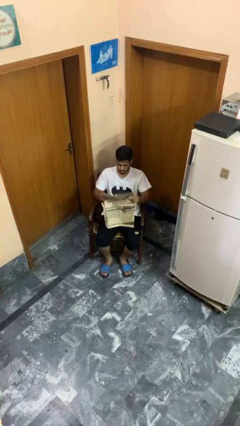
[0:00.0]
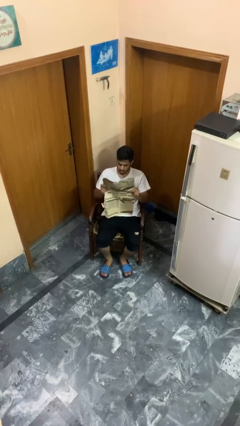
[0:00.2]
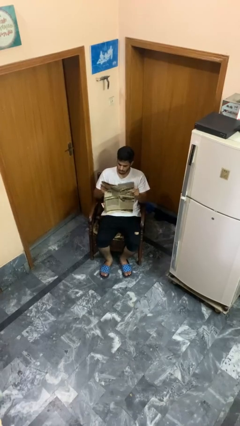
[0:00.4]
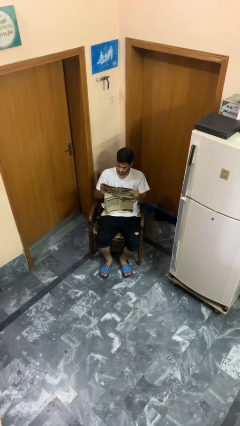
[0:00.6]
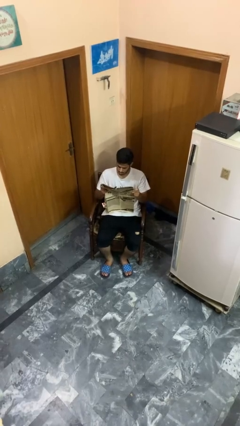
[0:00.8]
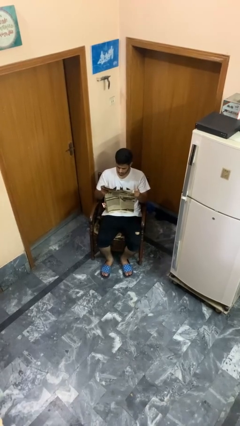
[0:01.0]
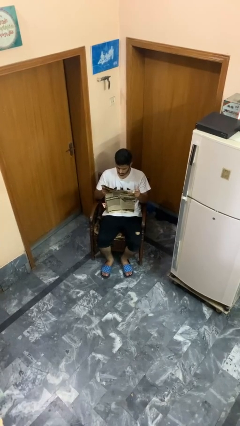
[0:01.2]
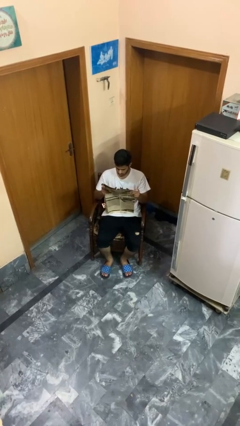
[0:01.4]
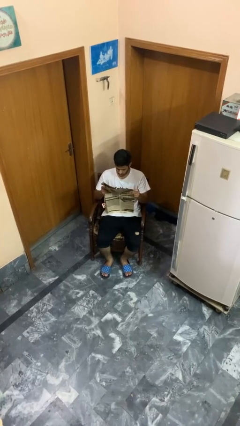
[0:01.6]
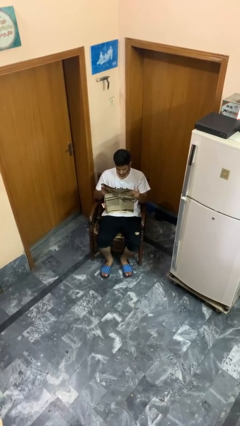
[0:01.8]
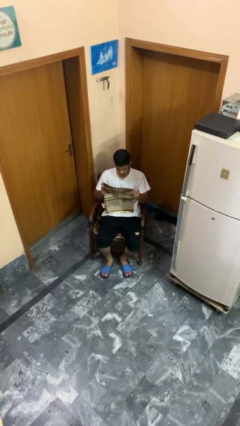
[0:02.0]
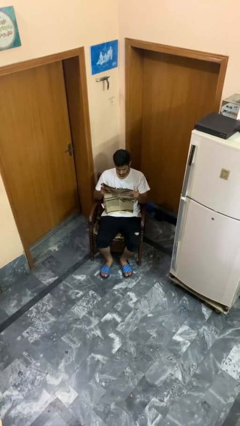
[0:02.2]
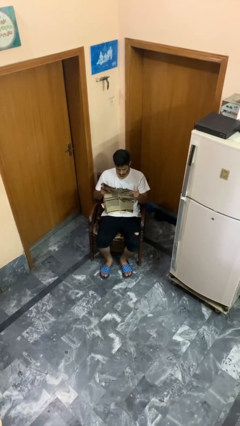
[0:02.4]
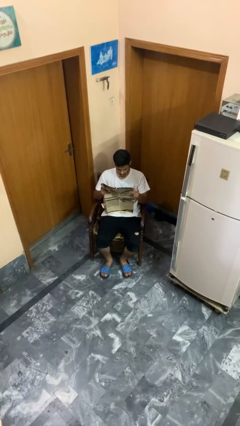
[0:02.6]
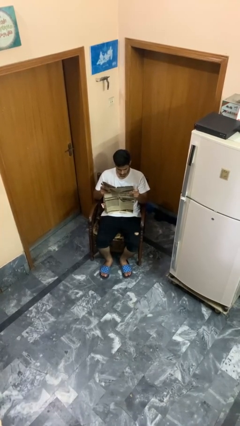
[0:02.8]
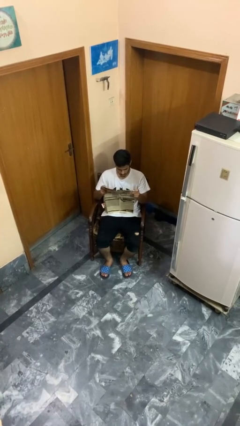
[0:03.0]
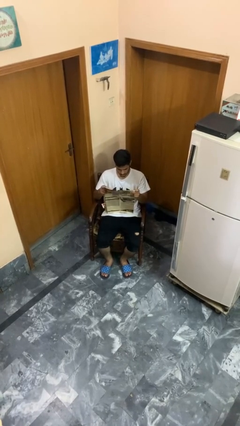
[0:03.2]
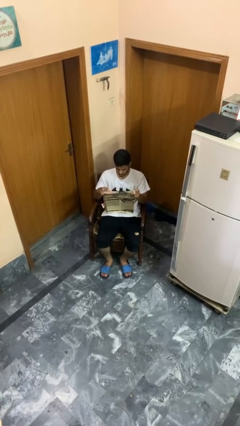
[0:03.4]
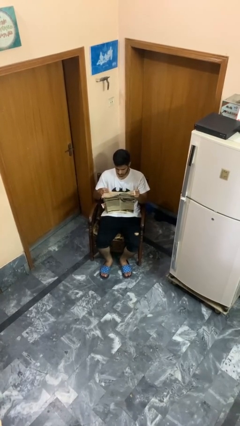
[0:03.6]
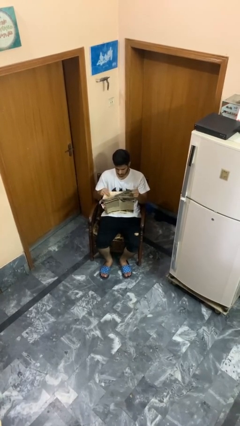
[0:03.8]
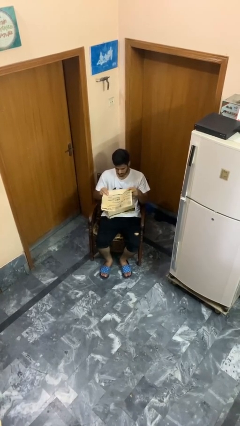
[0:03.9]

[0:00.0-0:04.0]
person reads newspaper

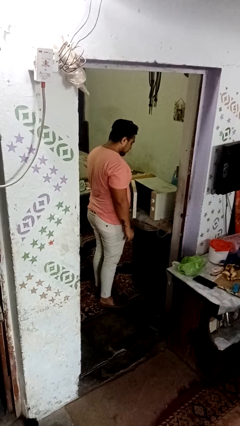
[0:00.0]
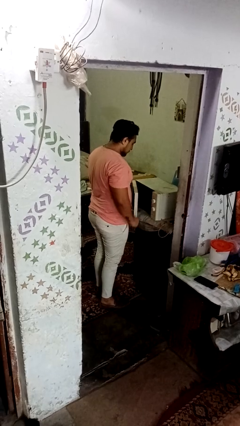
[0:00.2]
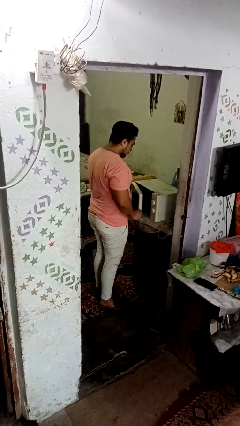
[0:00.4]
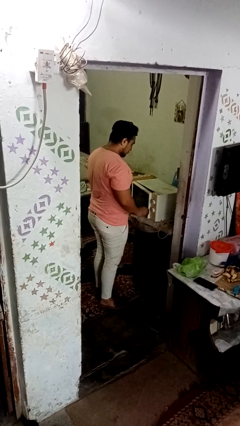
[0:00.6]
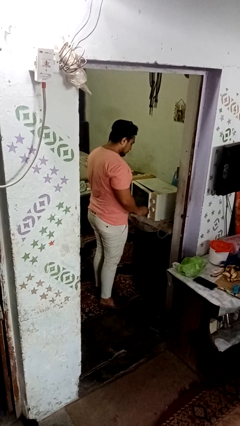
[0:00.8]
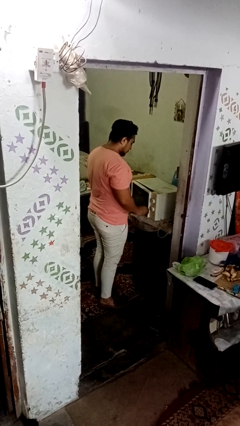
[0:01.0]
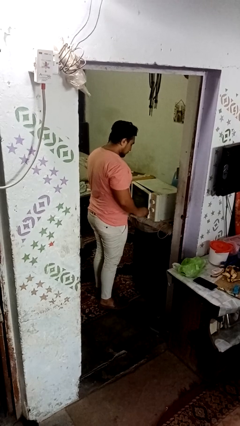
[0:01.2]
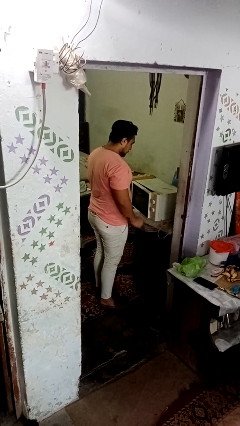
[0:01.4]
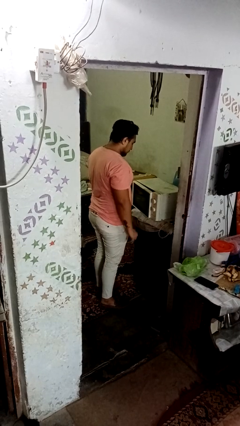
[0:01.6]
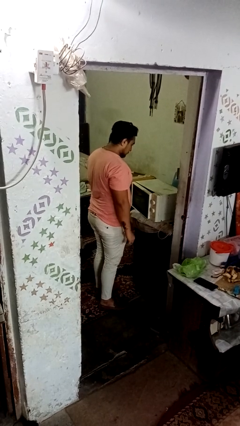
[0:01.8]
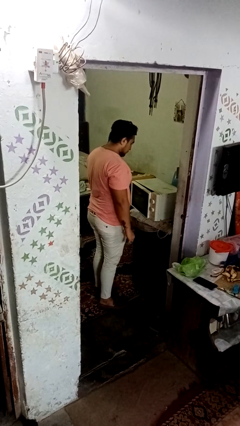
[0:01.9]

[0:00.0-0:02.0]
person closes dishwasher

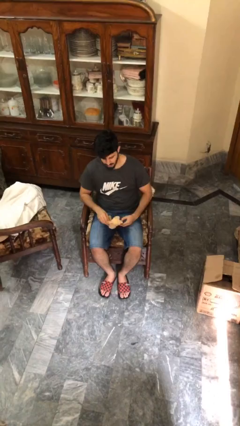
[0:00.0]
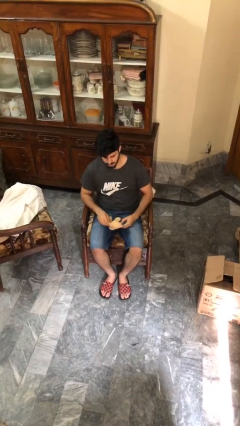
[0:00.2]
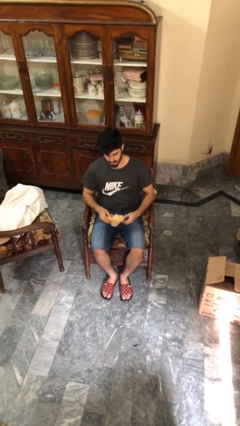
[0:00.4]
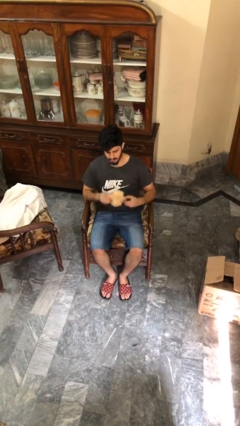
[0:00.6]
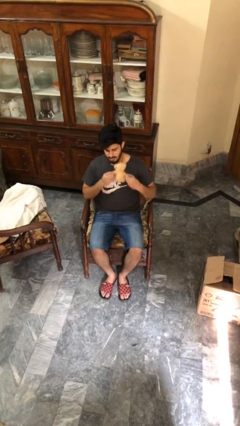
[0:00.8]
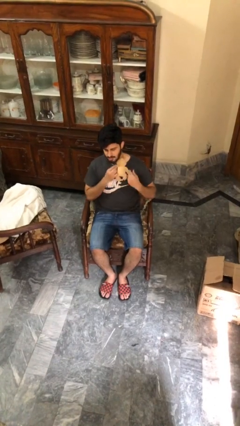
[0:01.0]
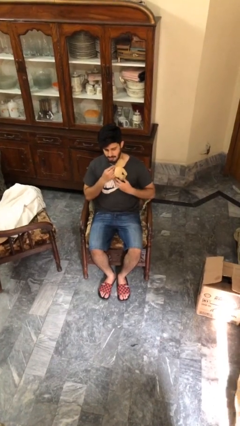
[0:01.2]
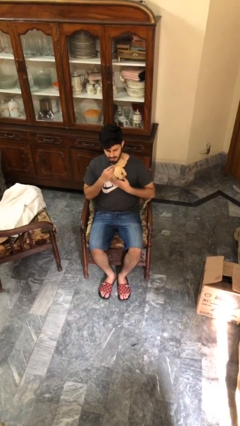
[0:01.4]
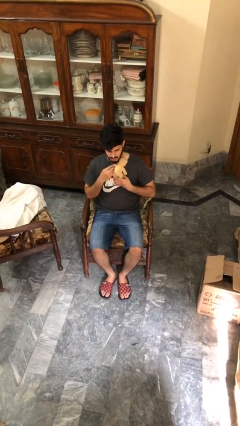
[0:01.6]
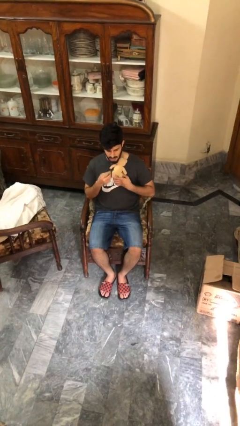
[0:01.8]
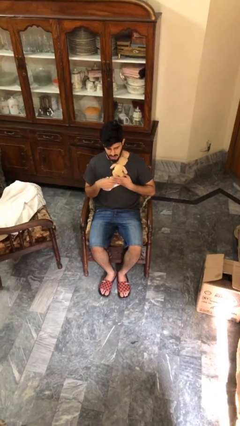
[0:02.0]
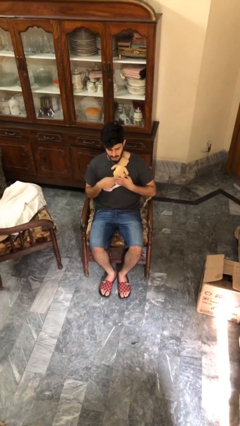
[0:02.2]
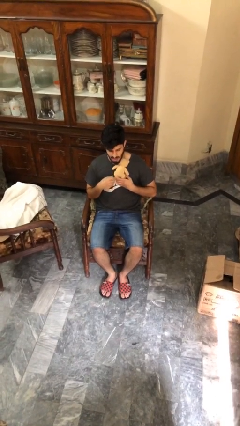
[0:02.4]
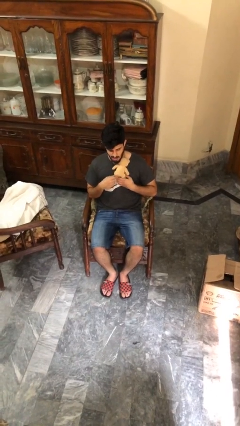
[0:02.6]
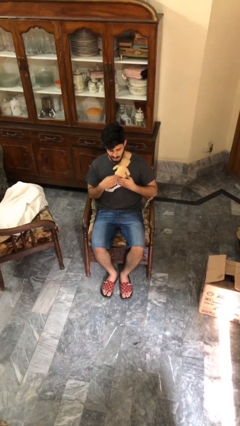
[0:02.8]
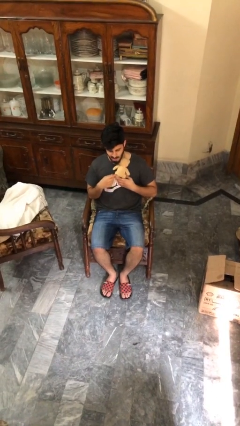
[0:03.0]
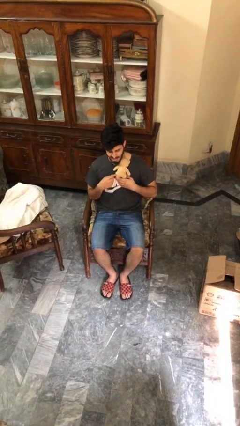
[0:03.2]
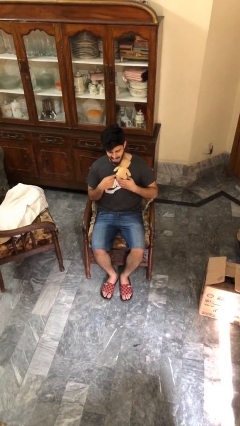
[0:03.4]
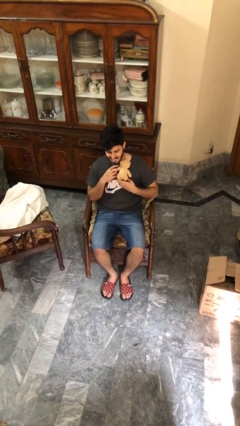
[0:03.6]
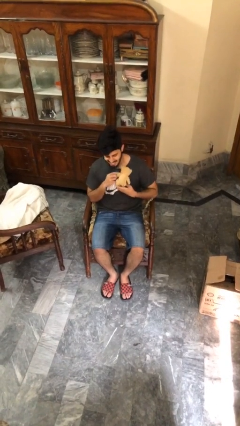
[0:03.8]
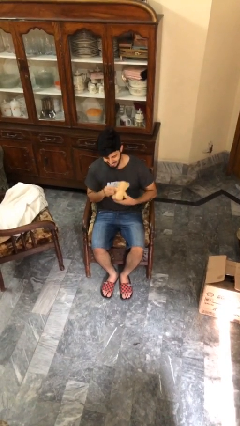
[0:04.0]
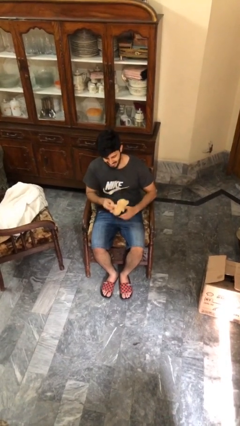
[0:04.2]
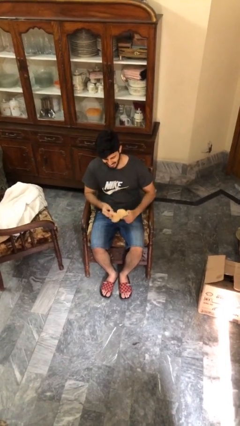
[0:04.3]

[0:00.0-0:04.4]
person hugs stuffed animal

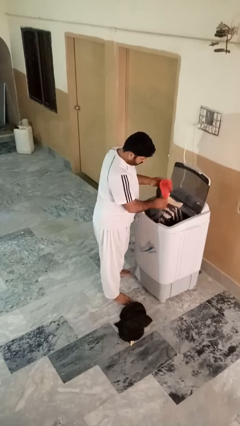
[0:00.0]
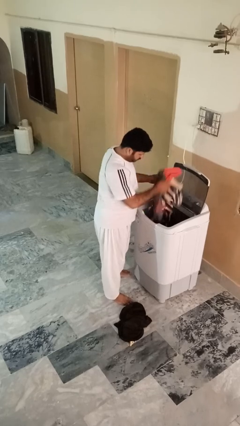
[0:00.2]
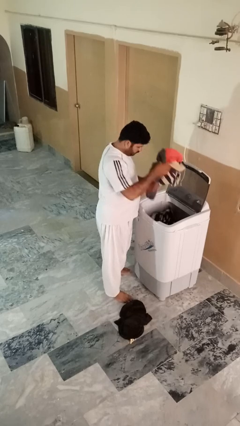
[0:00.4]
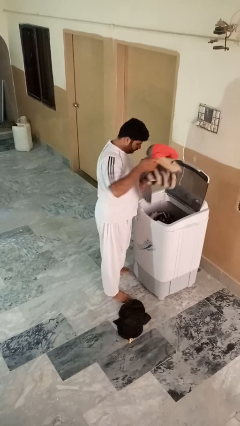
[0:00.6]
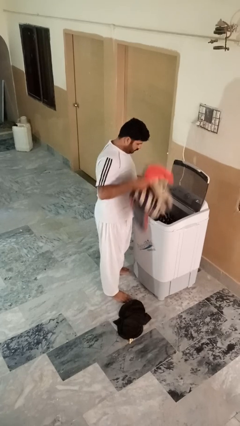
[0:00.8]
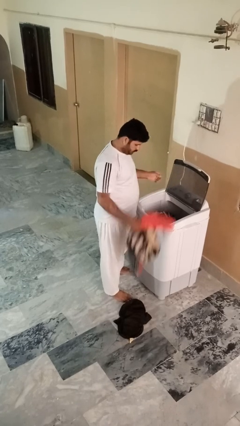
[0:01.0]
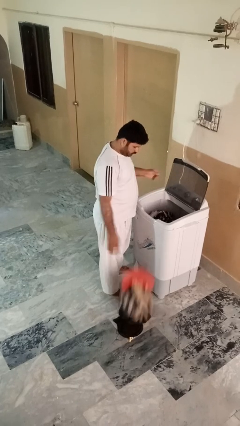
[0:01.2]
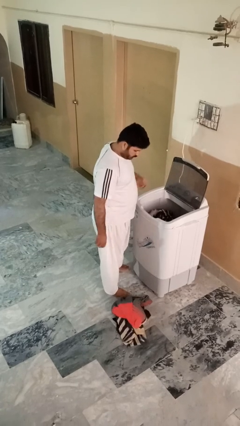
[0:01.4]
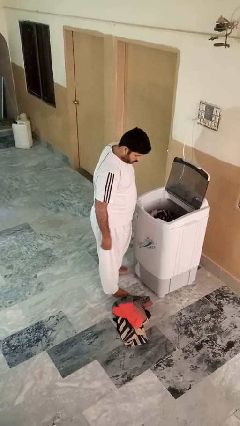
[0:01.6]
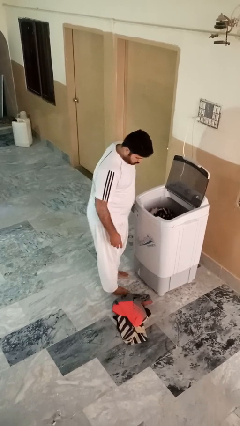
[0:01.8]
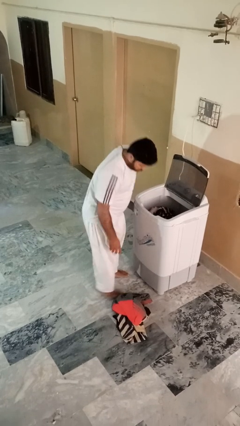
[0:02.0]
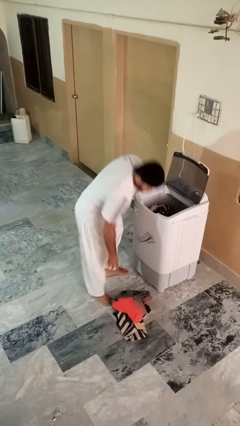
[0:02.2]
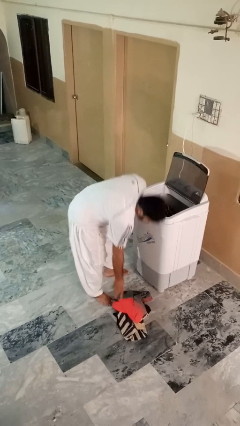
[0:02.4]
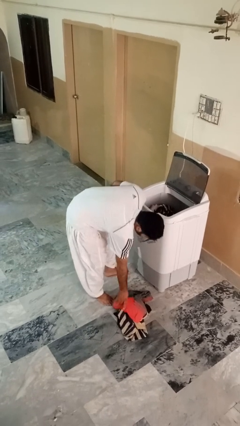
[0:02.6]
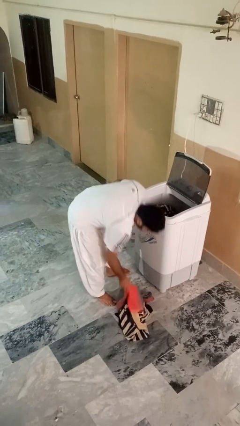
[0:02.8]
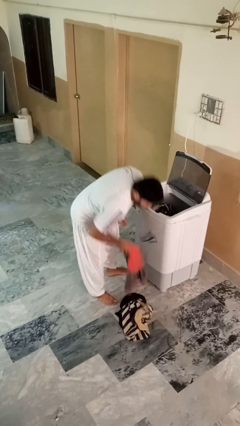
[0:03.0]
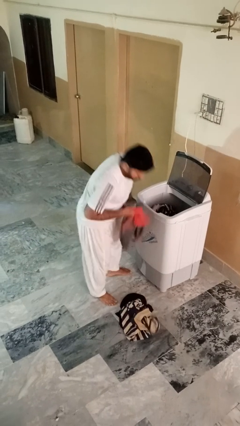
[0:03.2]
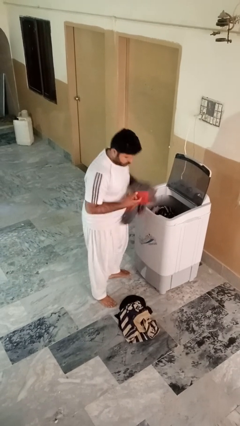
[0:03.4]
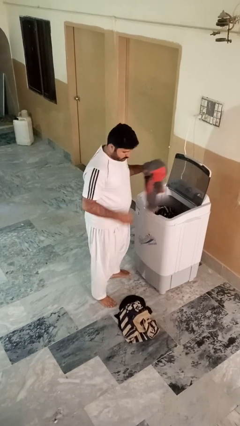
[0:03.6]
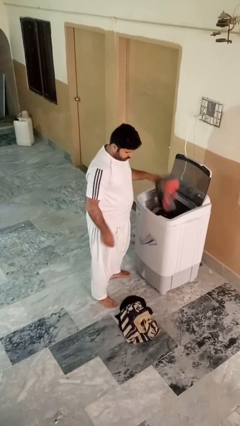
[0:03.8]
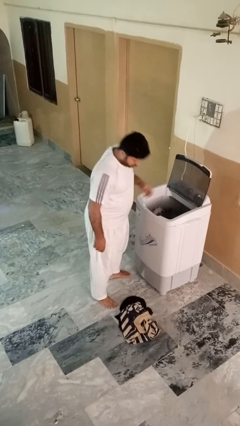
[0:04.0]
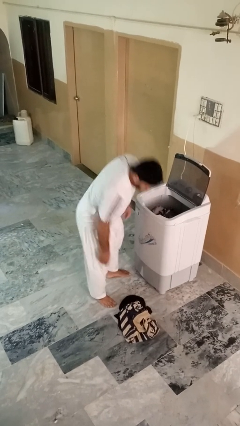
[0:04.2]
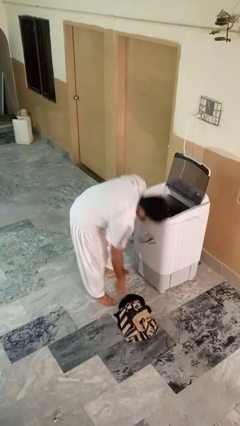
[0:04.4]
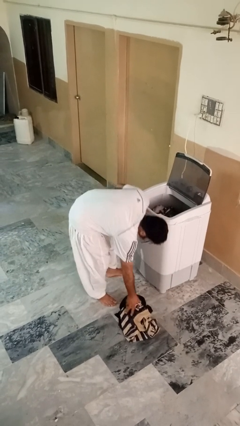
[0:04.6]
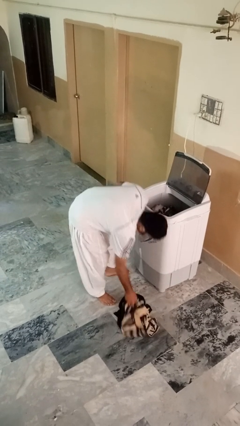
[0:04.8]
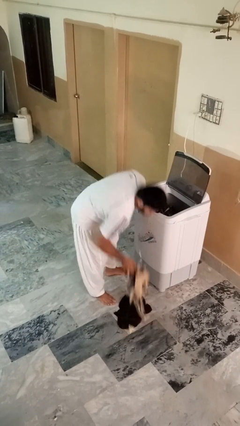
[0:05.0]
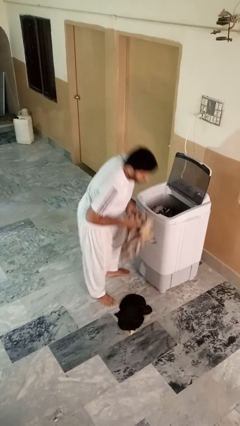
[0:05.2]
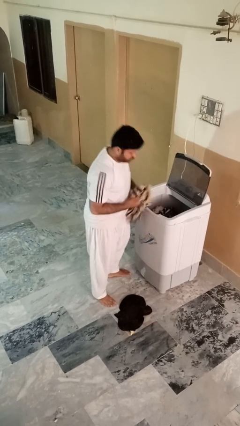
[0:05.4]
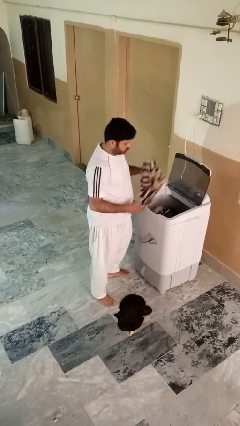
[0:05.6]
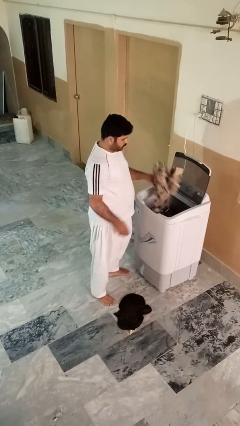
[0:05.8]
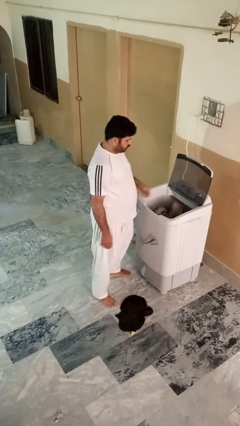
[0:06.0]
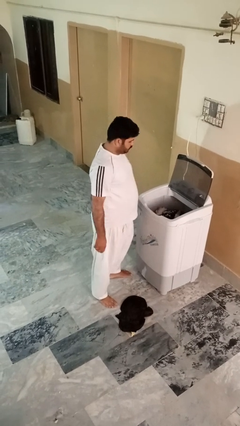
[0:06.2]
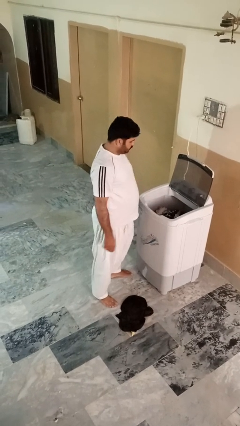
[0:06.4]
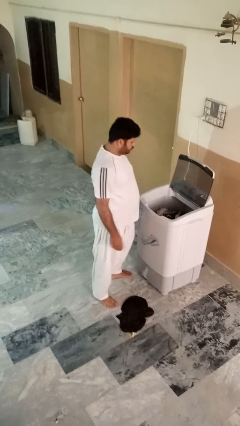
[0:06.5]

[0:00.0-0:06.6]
person loads clotheswasher

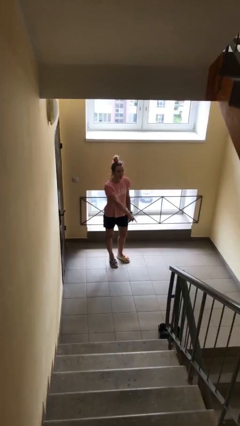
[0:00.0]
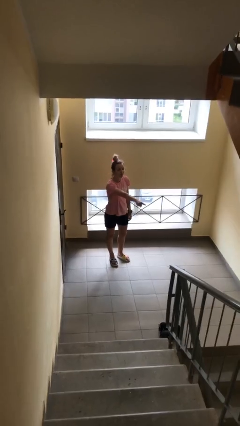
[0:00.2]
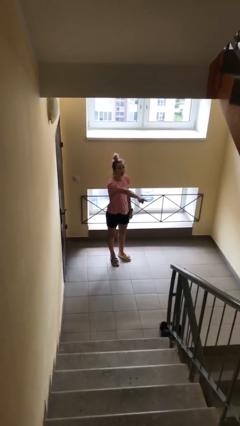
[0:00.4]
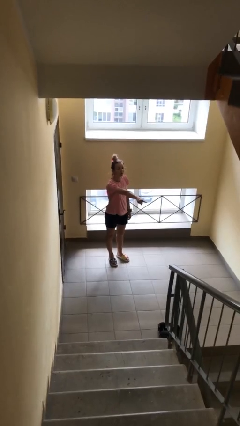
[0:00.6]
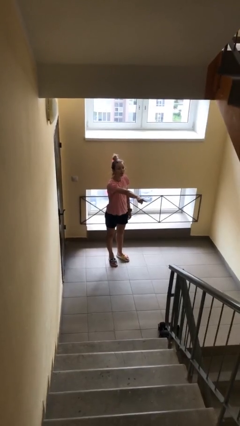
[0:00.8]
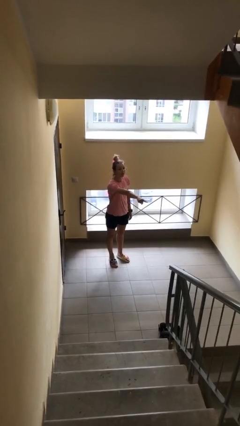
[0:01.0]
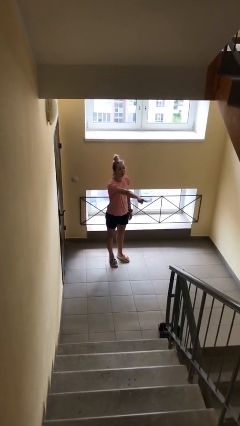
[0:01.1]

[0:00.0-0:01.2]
person points at person
